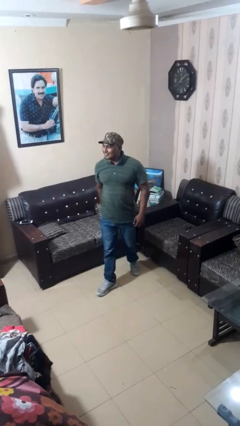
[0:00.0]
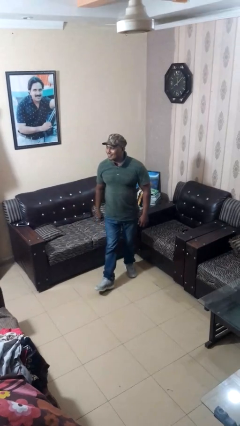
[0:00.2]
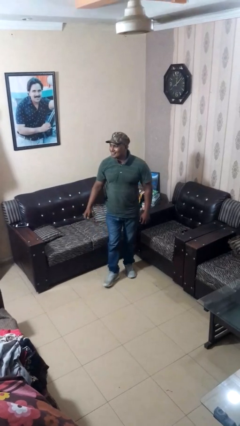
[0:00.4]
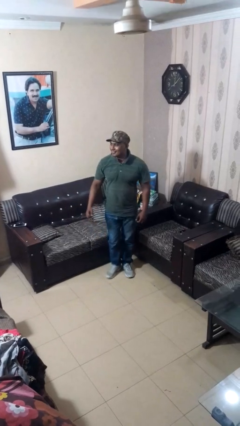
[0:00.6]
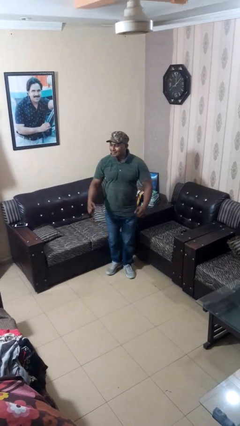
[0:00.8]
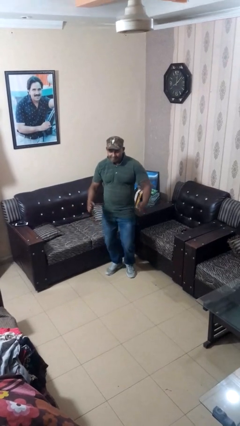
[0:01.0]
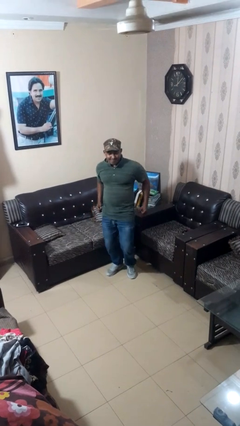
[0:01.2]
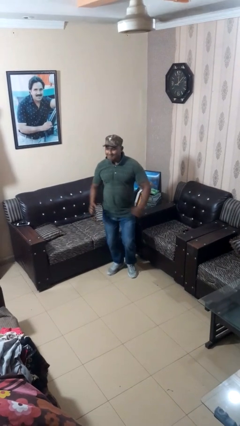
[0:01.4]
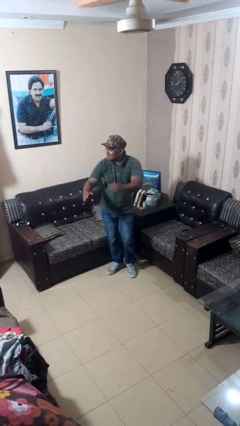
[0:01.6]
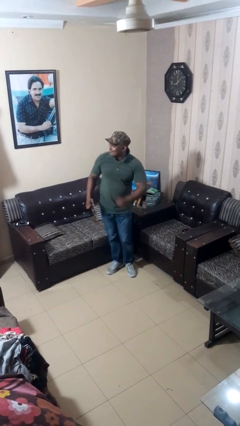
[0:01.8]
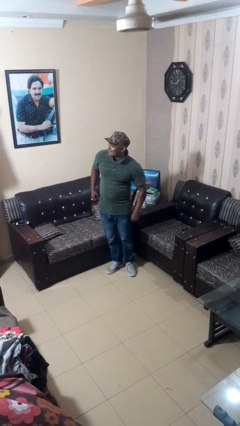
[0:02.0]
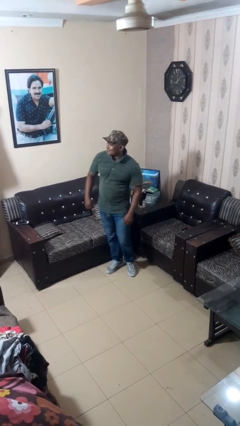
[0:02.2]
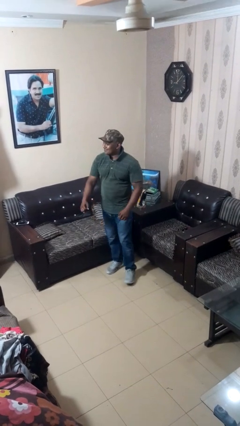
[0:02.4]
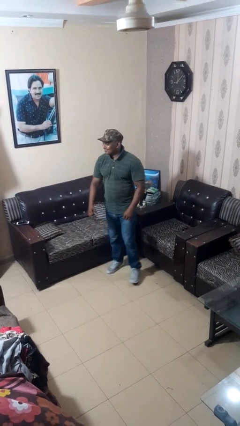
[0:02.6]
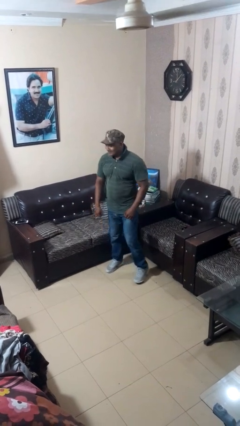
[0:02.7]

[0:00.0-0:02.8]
person dances in place

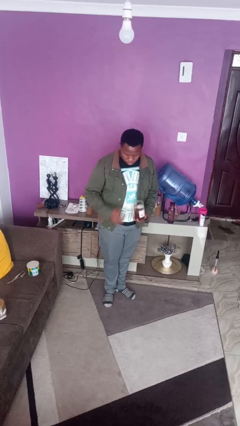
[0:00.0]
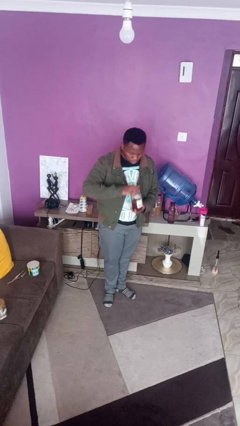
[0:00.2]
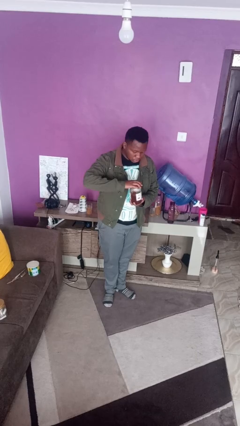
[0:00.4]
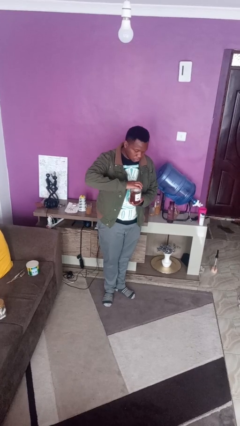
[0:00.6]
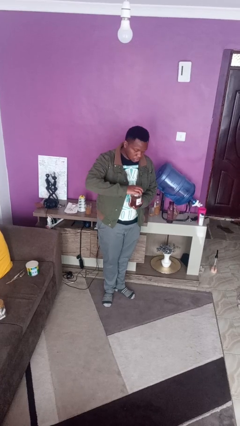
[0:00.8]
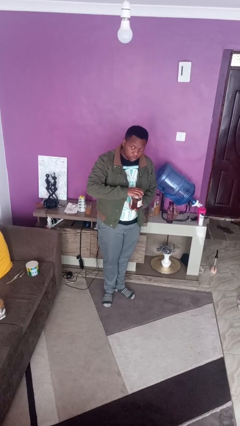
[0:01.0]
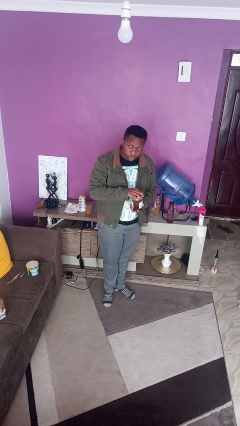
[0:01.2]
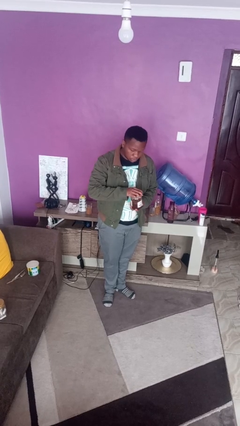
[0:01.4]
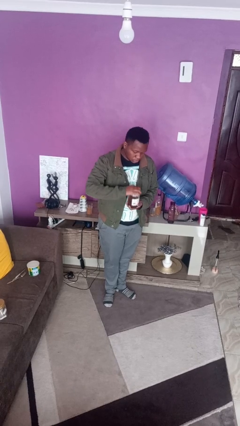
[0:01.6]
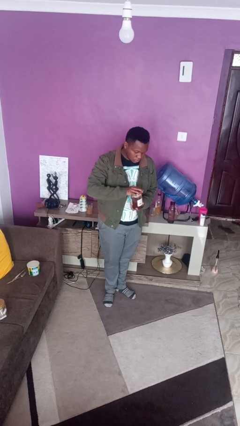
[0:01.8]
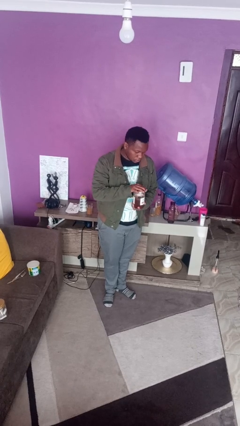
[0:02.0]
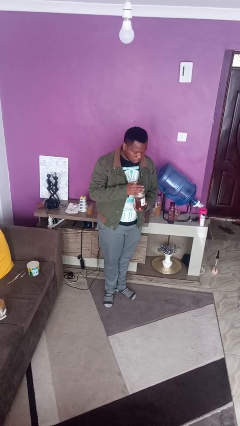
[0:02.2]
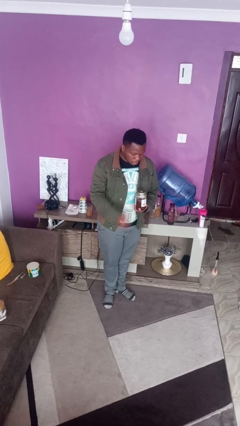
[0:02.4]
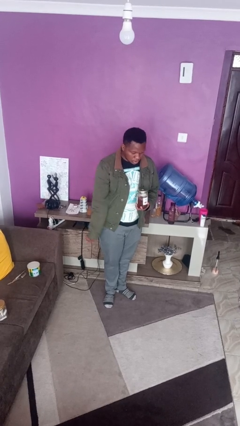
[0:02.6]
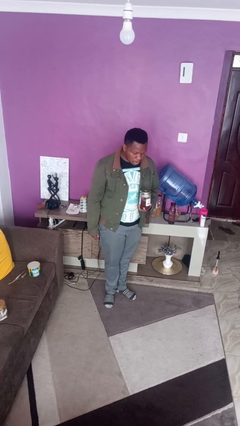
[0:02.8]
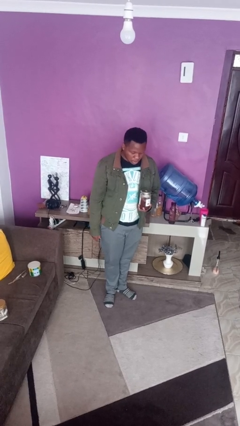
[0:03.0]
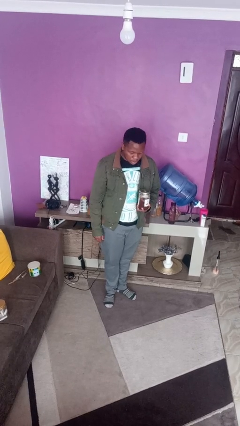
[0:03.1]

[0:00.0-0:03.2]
person closes jar

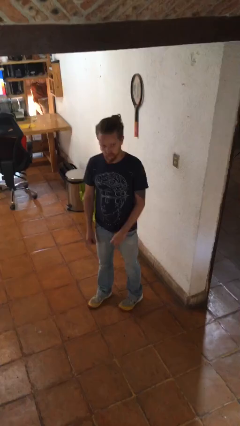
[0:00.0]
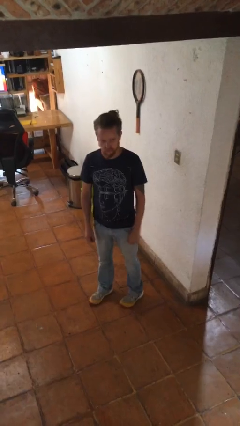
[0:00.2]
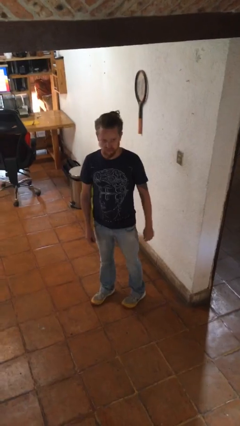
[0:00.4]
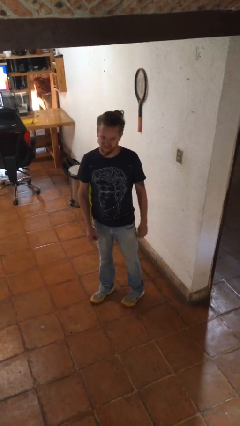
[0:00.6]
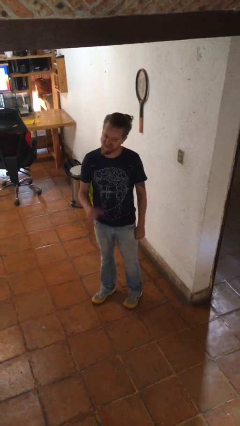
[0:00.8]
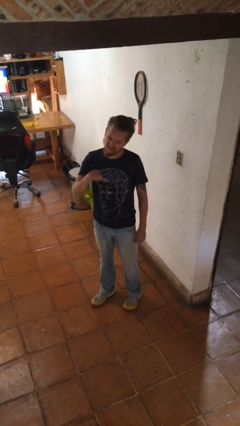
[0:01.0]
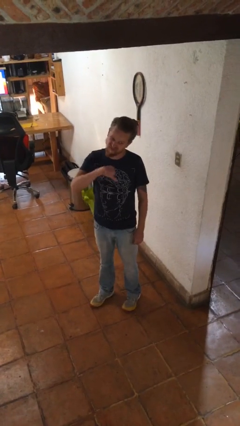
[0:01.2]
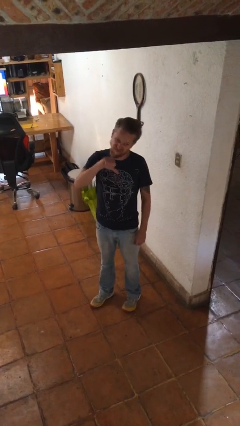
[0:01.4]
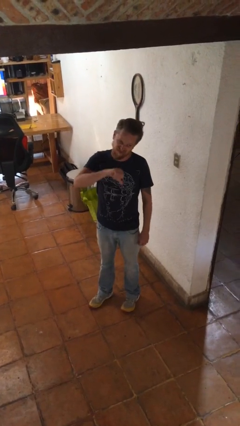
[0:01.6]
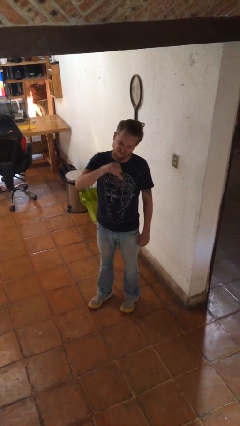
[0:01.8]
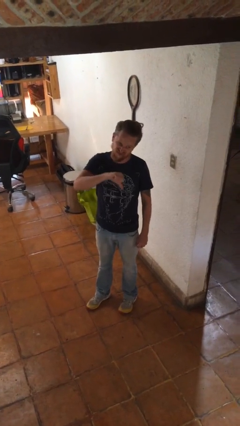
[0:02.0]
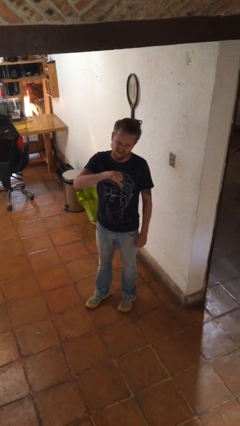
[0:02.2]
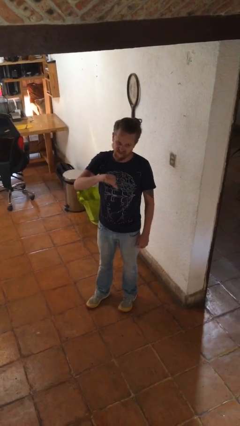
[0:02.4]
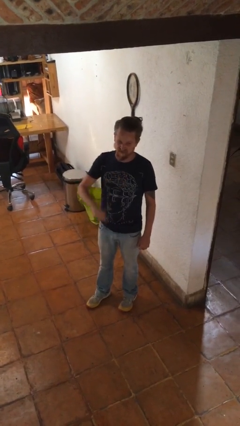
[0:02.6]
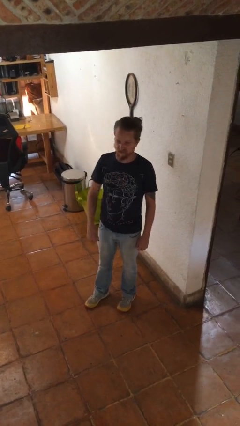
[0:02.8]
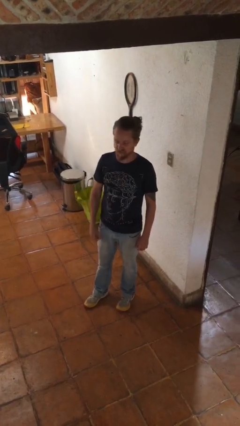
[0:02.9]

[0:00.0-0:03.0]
person gestures thumbs down

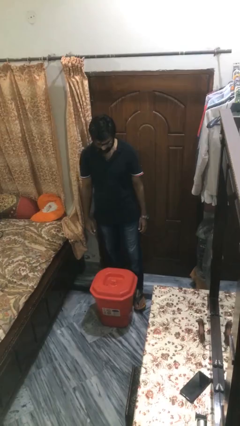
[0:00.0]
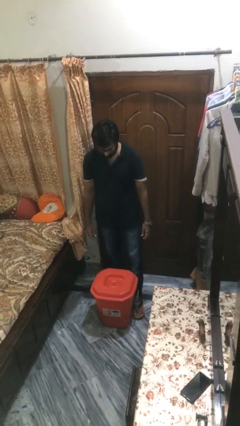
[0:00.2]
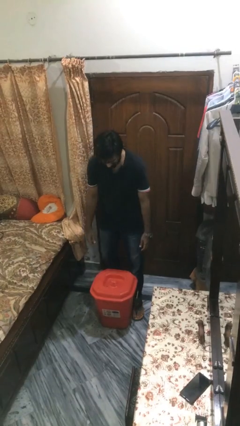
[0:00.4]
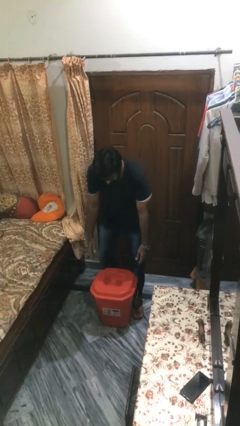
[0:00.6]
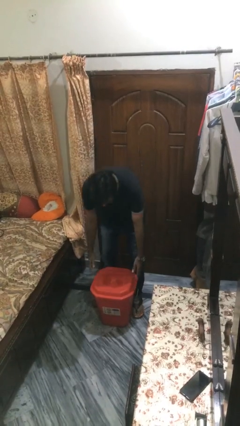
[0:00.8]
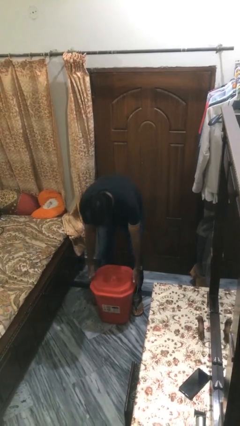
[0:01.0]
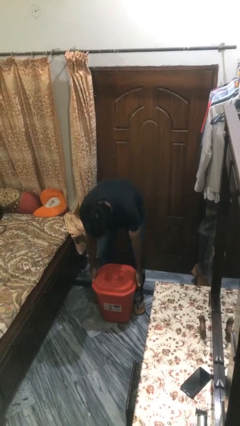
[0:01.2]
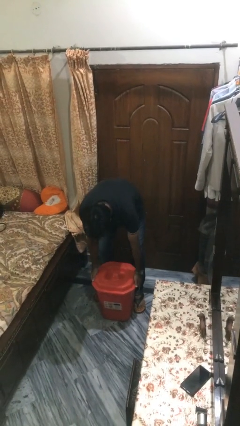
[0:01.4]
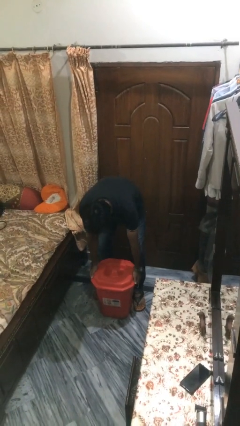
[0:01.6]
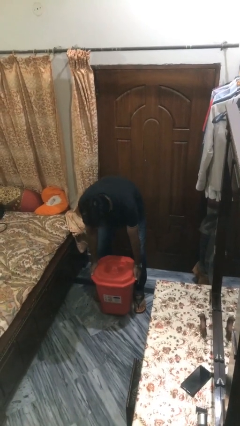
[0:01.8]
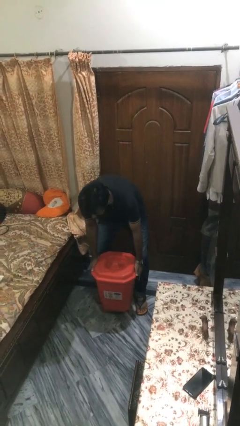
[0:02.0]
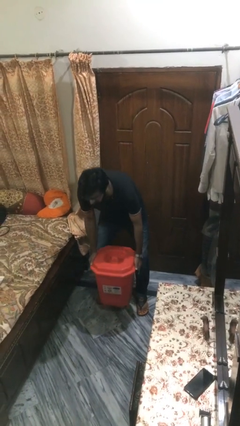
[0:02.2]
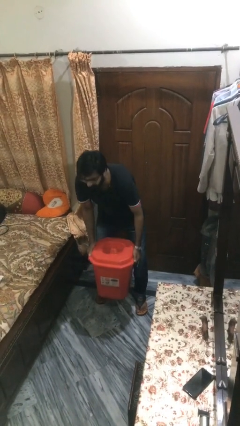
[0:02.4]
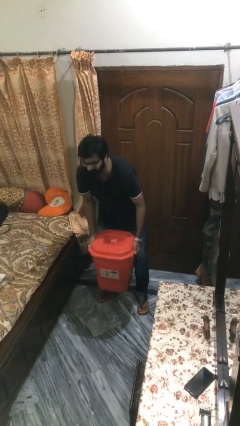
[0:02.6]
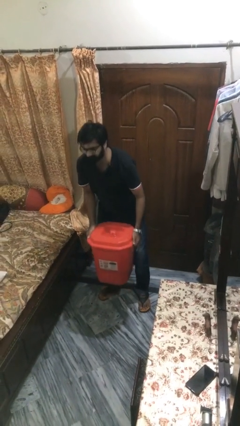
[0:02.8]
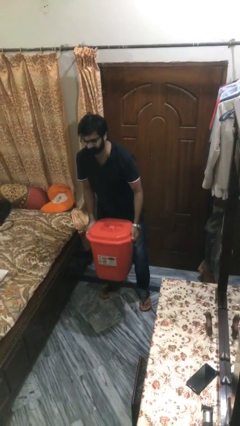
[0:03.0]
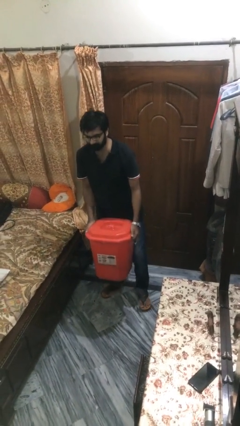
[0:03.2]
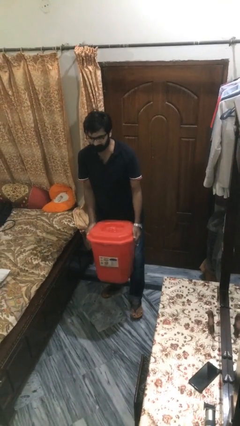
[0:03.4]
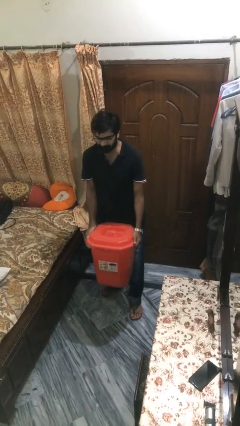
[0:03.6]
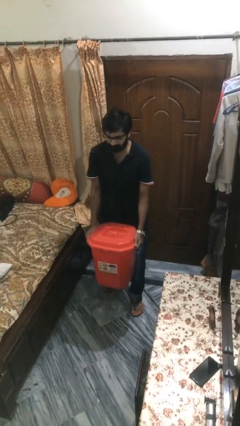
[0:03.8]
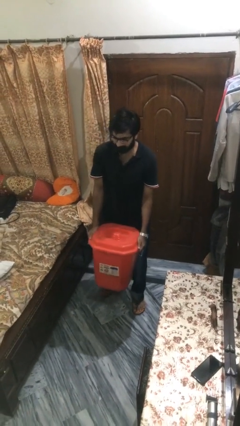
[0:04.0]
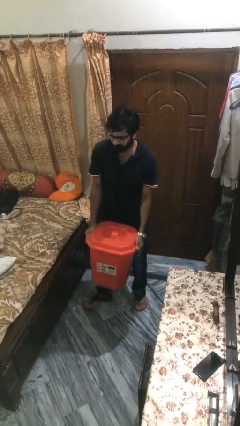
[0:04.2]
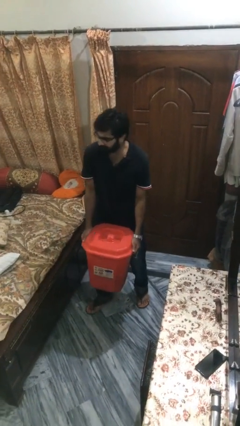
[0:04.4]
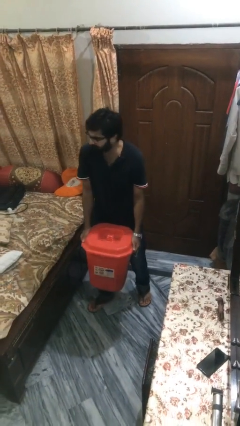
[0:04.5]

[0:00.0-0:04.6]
person picks up object from floor

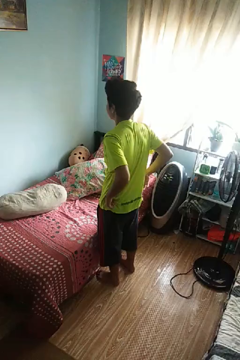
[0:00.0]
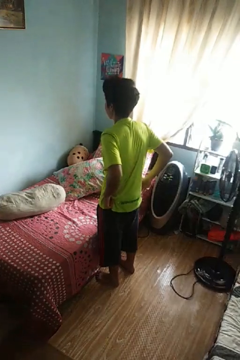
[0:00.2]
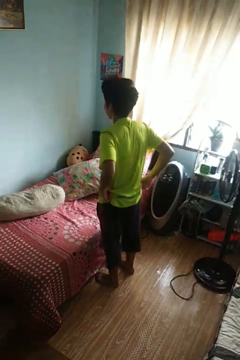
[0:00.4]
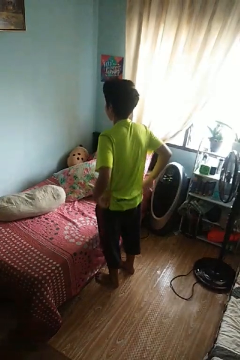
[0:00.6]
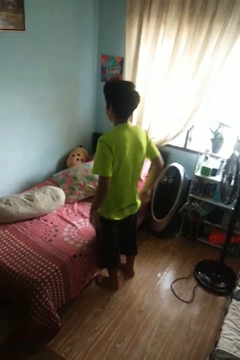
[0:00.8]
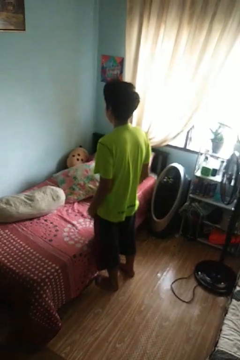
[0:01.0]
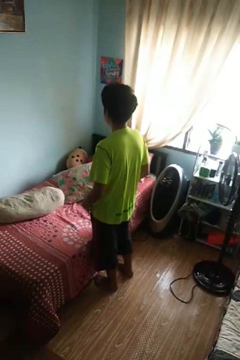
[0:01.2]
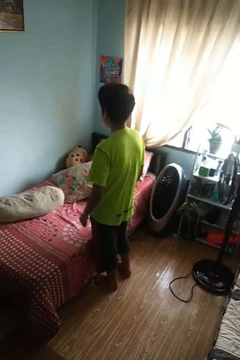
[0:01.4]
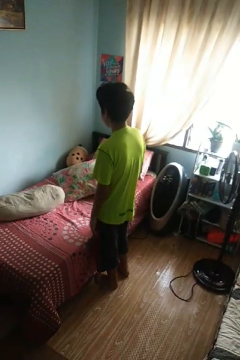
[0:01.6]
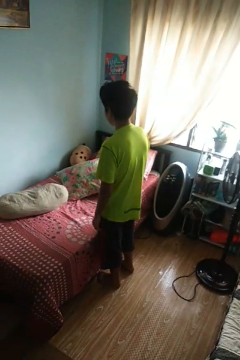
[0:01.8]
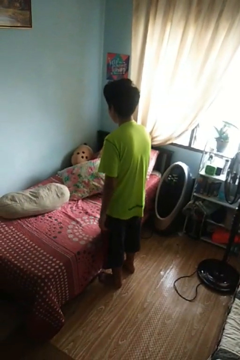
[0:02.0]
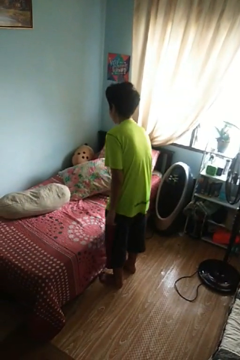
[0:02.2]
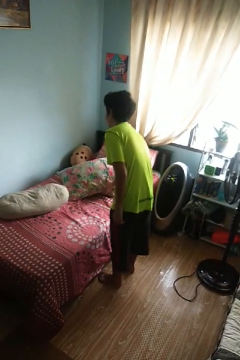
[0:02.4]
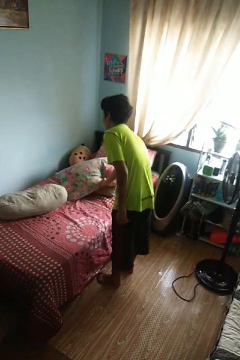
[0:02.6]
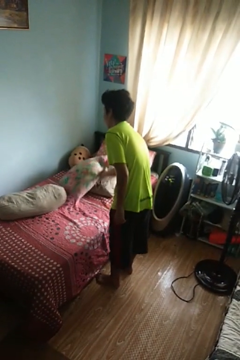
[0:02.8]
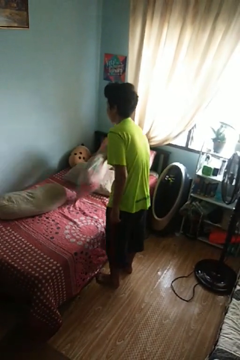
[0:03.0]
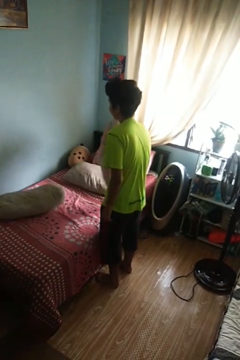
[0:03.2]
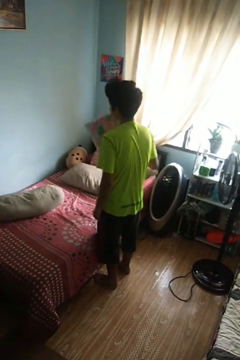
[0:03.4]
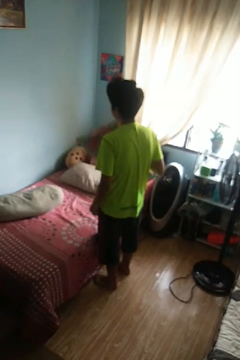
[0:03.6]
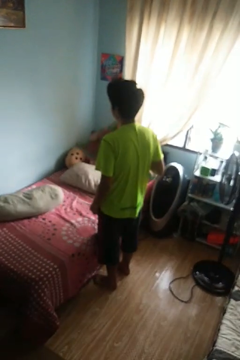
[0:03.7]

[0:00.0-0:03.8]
person picks up object from bed

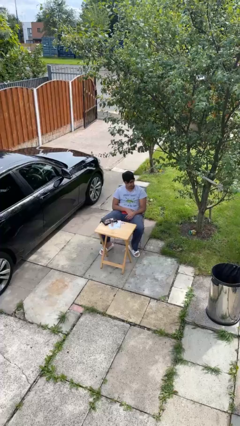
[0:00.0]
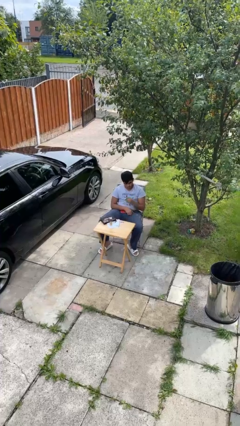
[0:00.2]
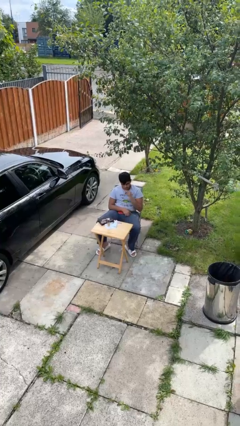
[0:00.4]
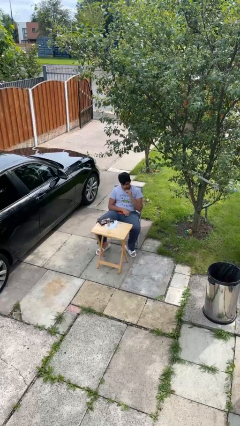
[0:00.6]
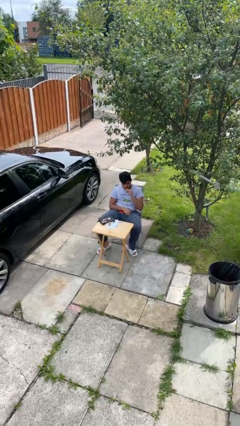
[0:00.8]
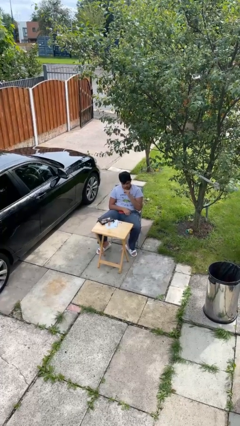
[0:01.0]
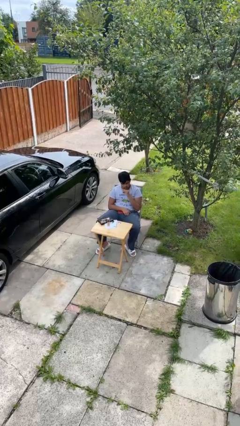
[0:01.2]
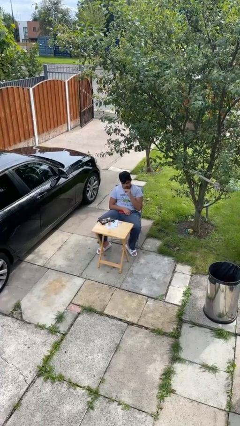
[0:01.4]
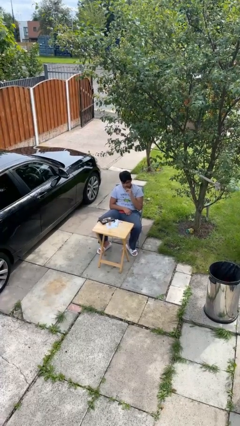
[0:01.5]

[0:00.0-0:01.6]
person applies lip makeup
